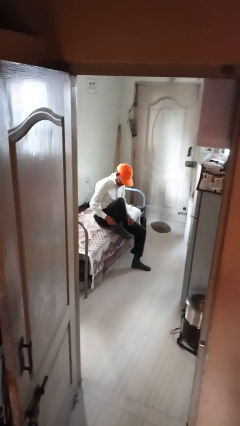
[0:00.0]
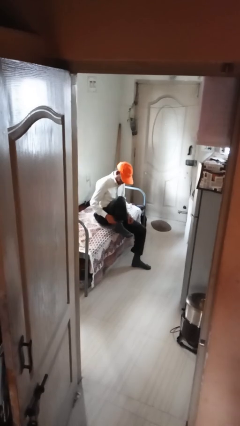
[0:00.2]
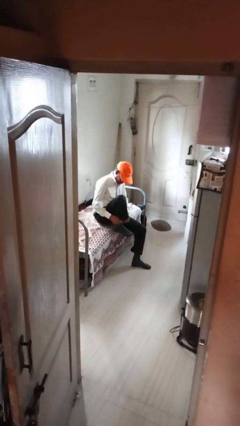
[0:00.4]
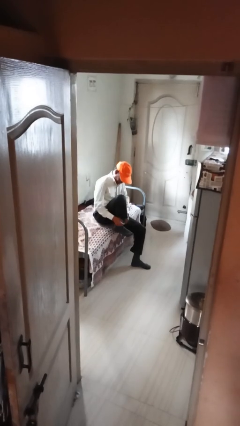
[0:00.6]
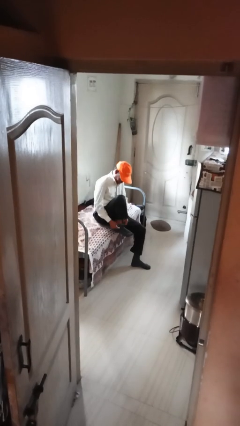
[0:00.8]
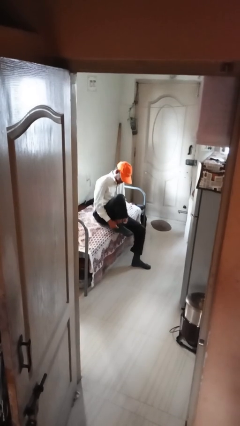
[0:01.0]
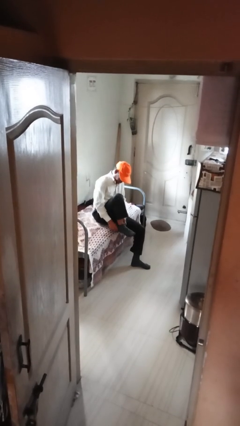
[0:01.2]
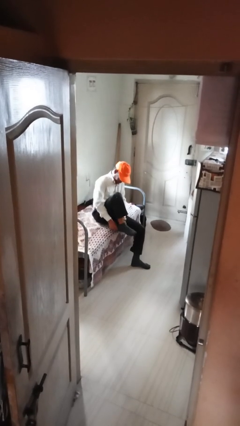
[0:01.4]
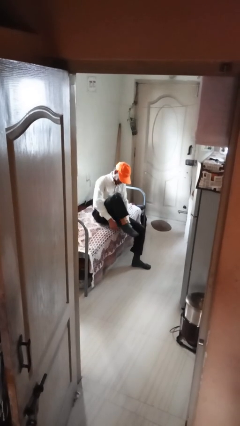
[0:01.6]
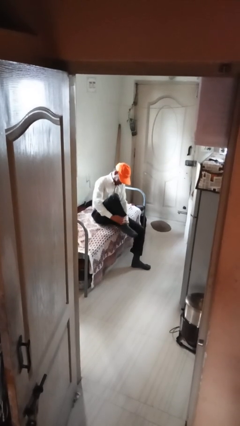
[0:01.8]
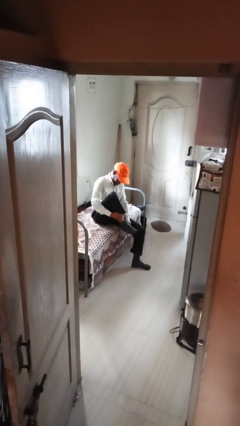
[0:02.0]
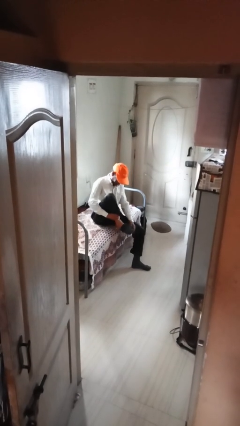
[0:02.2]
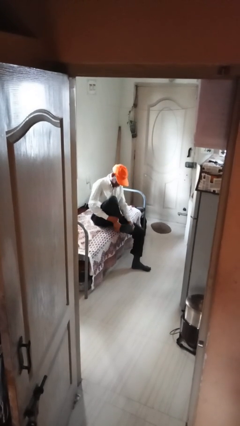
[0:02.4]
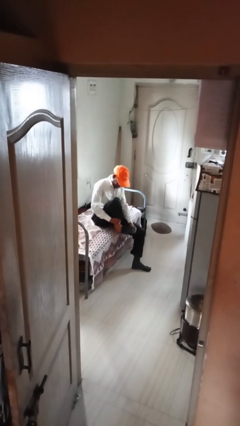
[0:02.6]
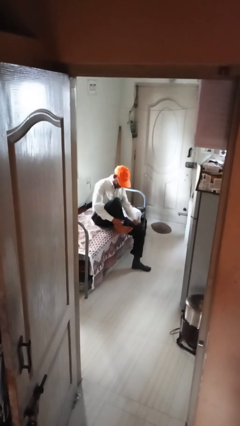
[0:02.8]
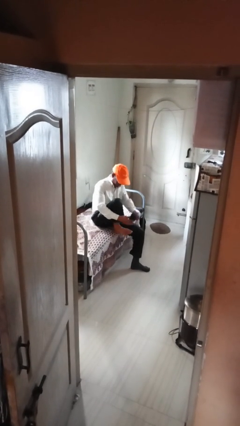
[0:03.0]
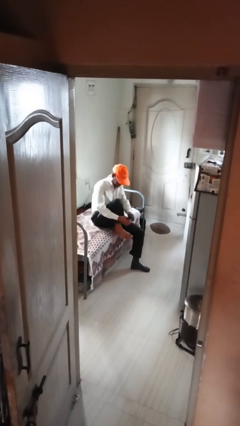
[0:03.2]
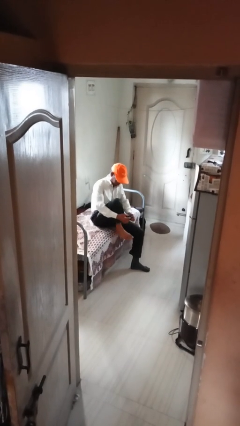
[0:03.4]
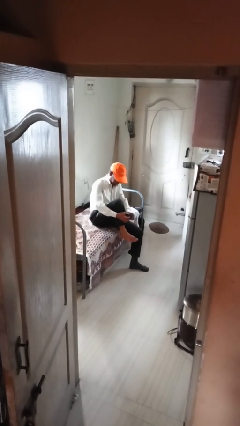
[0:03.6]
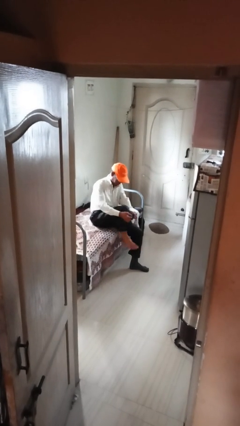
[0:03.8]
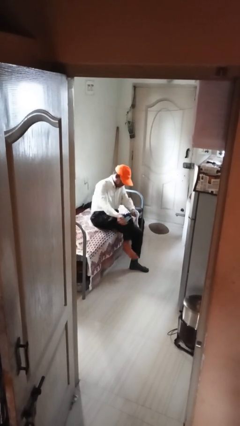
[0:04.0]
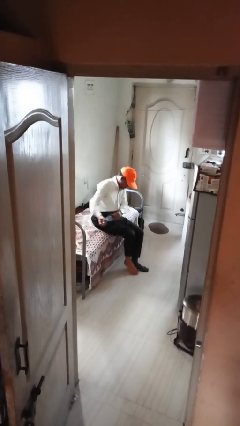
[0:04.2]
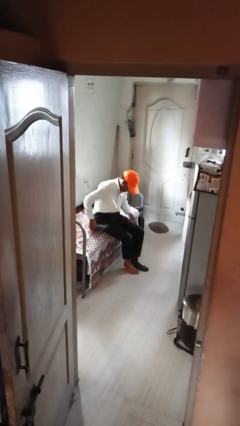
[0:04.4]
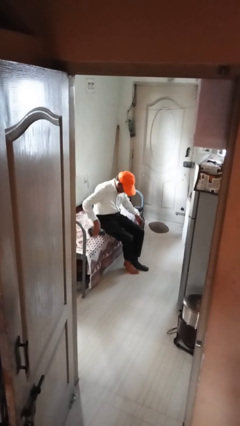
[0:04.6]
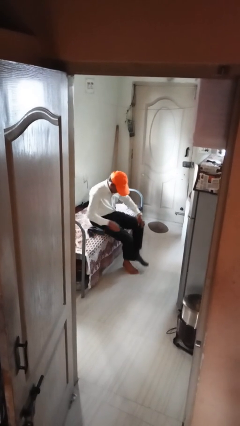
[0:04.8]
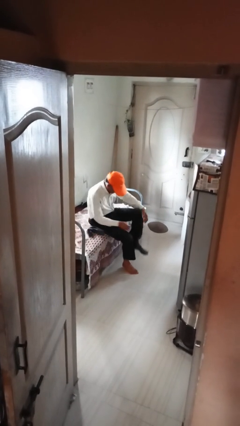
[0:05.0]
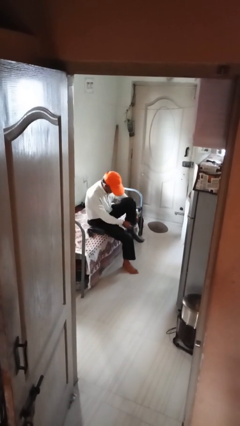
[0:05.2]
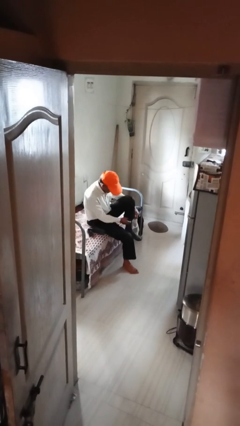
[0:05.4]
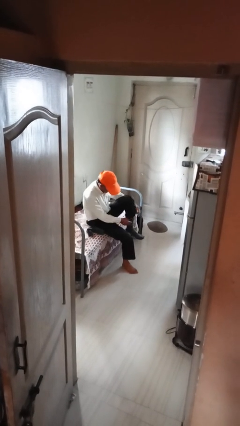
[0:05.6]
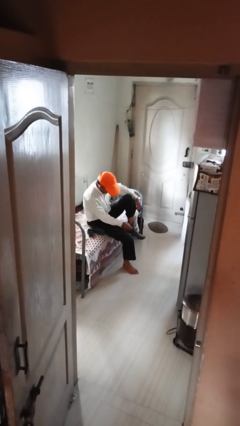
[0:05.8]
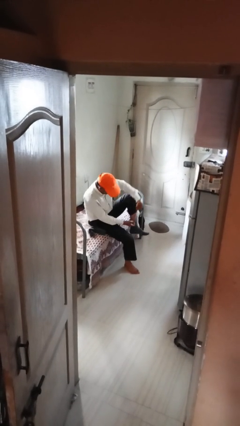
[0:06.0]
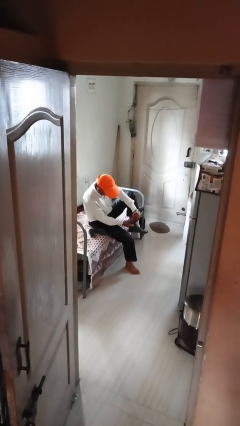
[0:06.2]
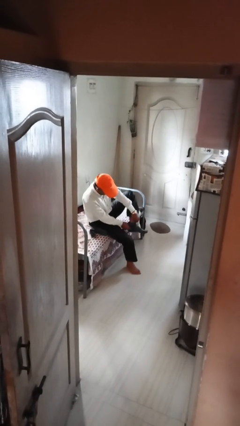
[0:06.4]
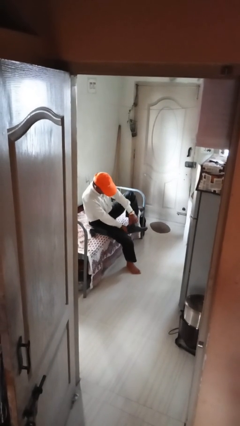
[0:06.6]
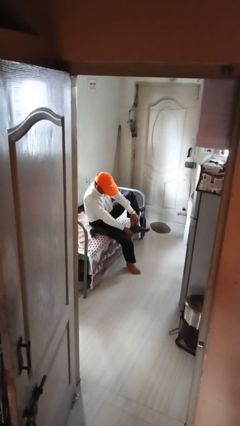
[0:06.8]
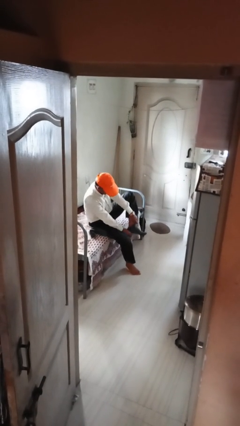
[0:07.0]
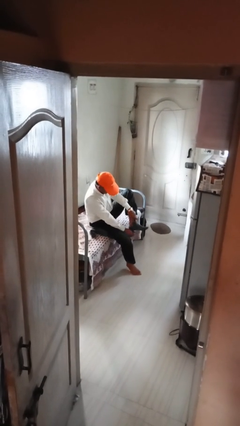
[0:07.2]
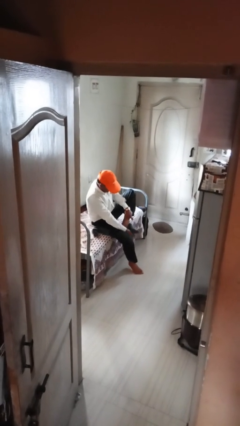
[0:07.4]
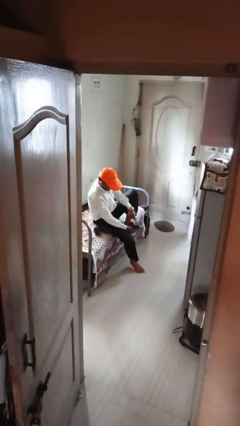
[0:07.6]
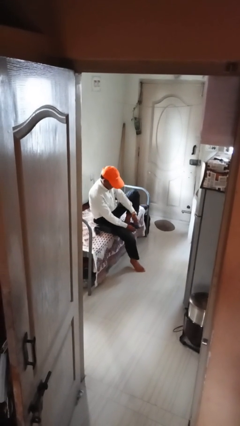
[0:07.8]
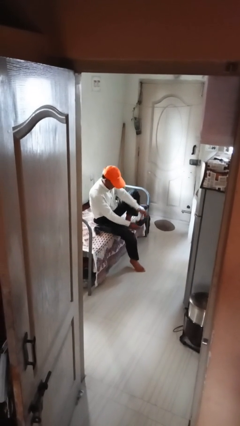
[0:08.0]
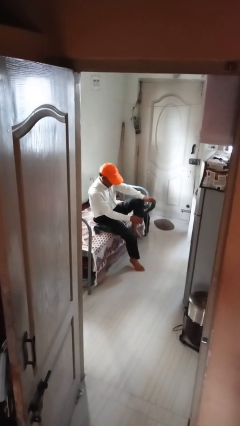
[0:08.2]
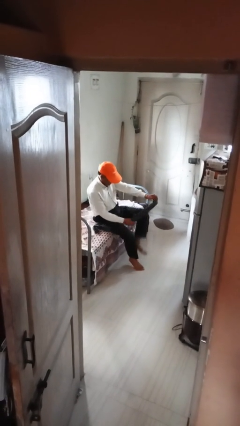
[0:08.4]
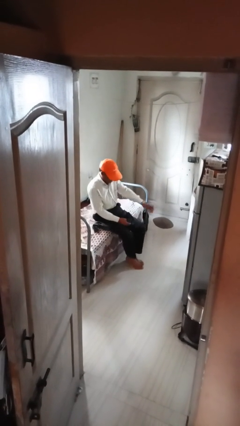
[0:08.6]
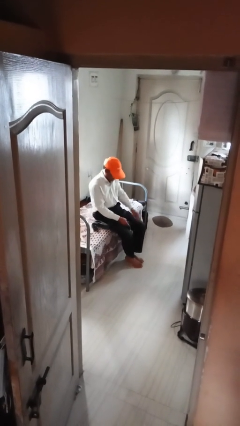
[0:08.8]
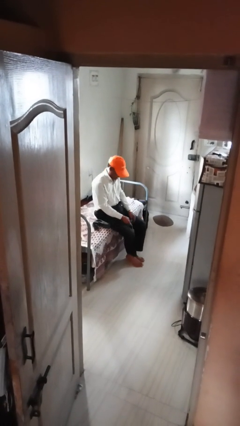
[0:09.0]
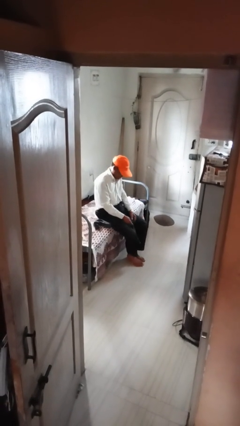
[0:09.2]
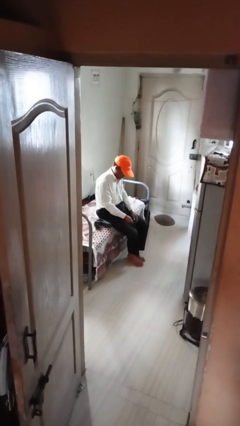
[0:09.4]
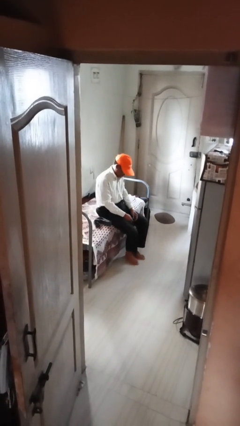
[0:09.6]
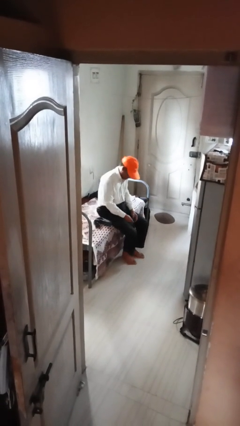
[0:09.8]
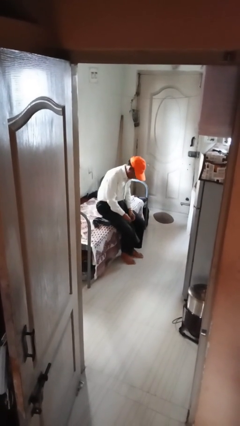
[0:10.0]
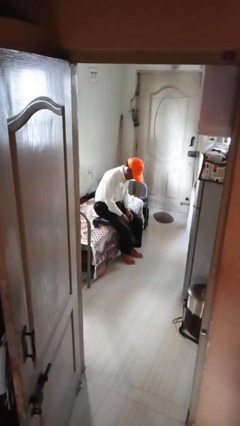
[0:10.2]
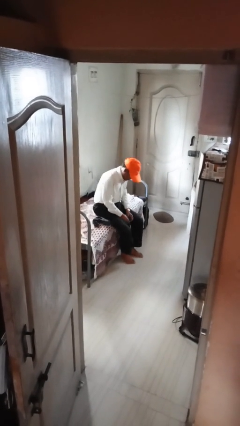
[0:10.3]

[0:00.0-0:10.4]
person takes off socks

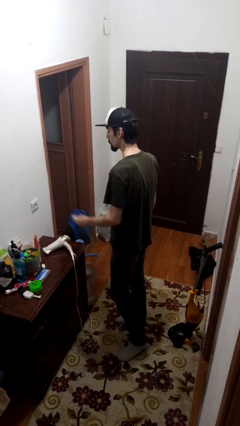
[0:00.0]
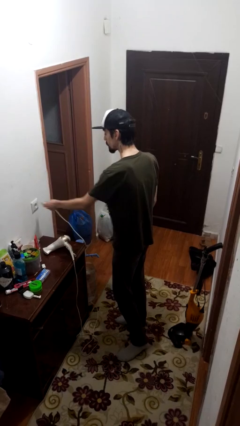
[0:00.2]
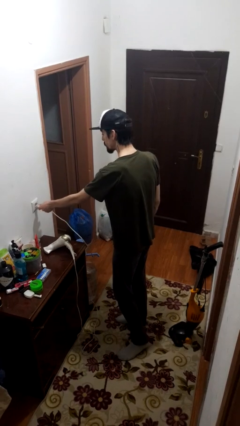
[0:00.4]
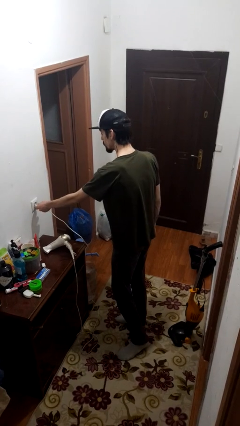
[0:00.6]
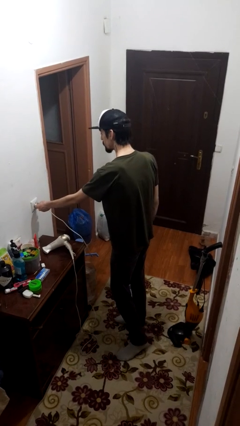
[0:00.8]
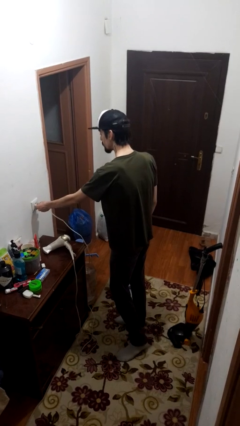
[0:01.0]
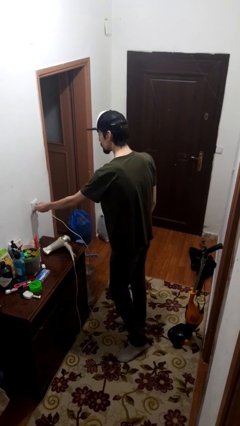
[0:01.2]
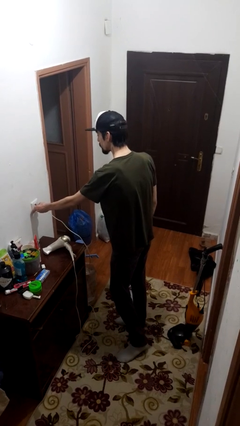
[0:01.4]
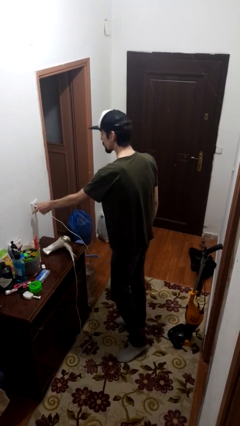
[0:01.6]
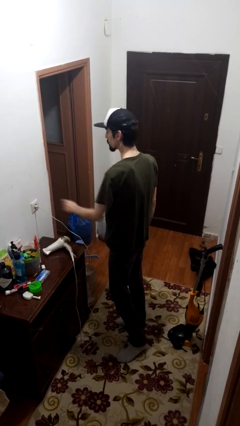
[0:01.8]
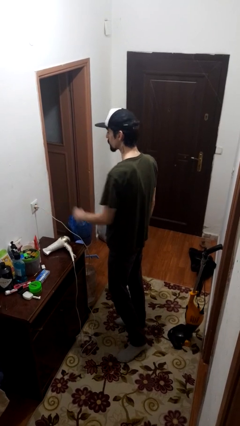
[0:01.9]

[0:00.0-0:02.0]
person plugs into electrical socket

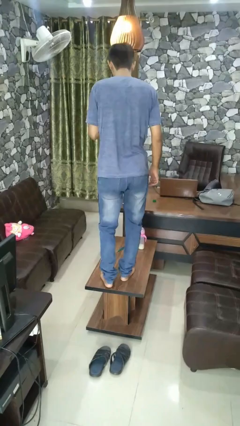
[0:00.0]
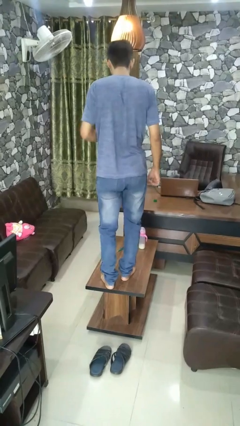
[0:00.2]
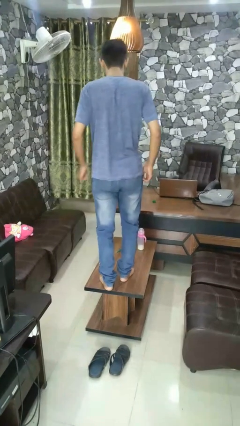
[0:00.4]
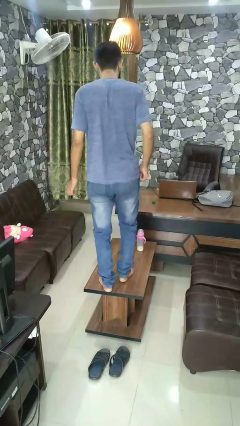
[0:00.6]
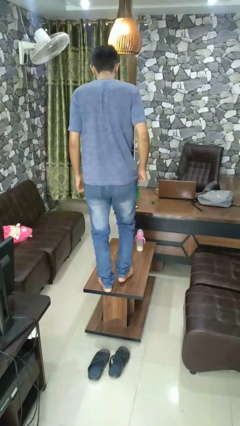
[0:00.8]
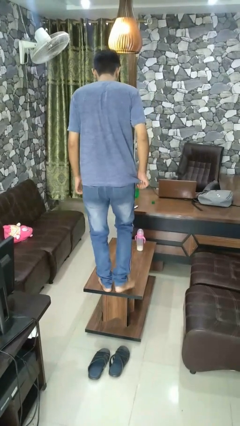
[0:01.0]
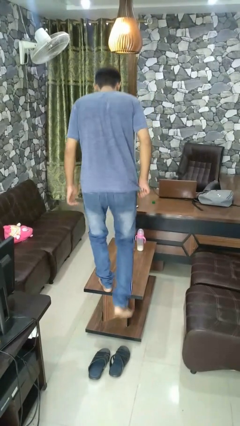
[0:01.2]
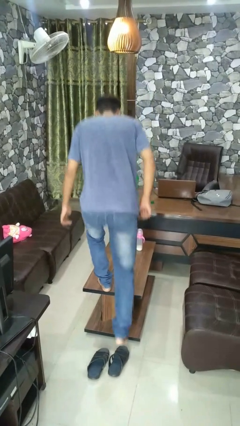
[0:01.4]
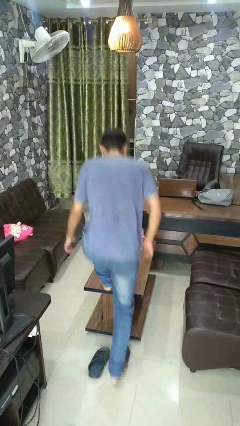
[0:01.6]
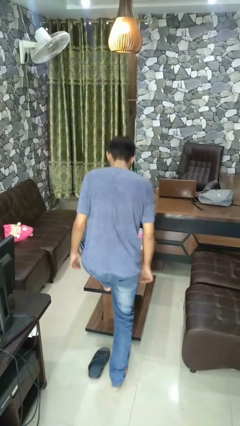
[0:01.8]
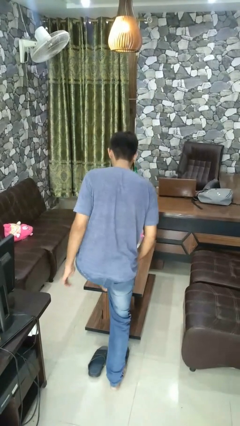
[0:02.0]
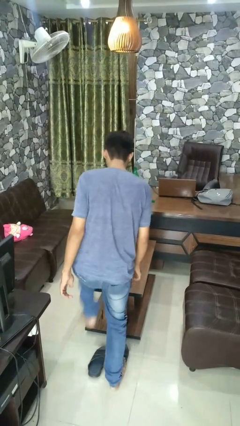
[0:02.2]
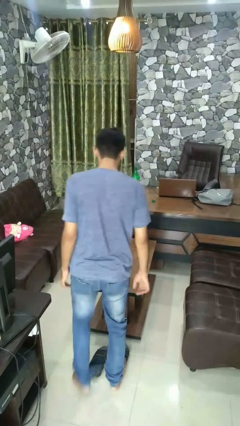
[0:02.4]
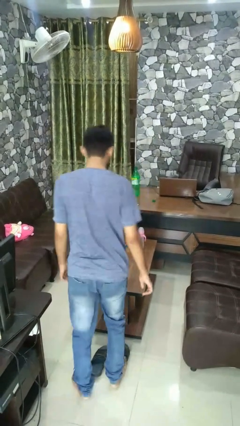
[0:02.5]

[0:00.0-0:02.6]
person climbs off table

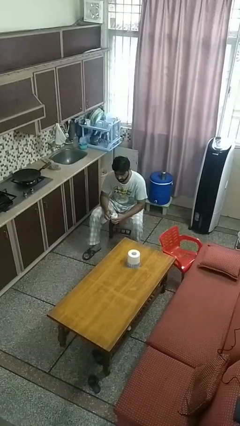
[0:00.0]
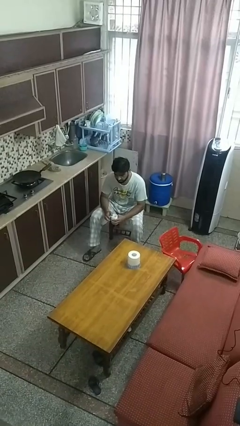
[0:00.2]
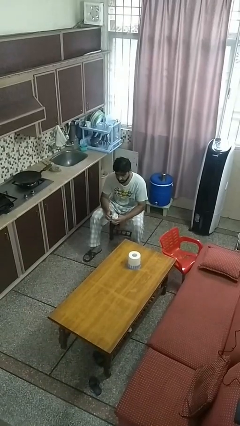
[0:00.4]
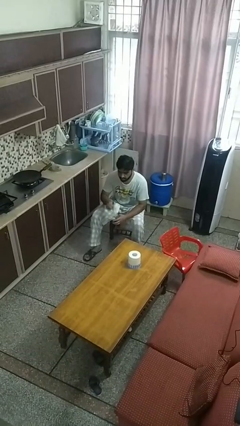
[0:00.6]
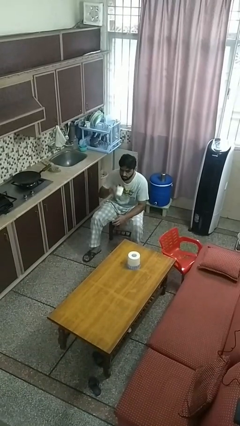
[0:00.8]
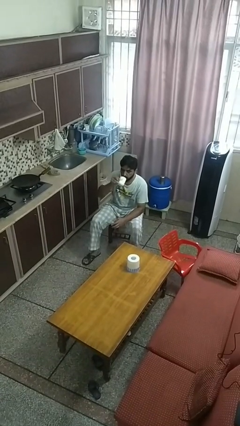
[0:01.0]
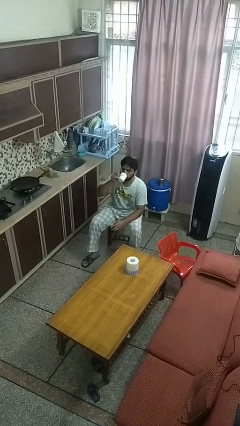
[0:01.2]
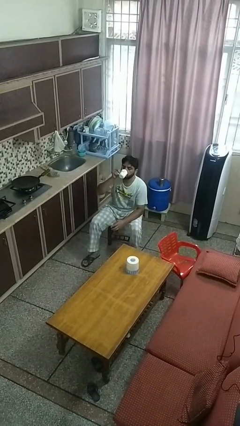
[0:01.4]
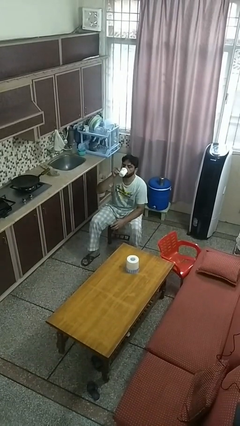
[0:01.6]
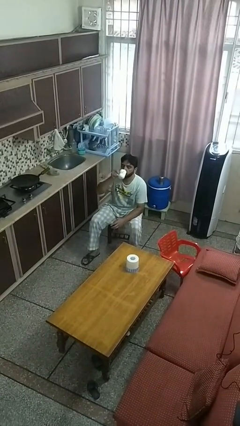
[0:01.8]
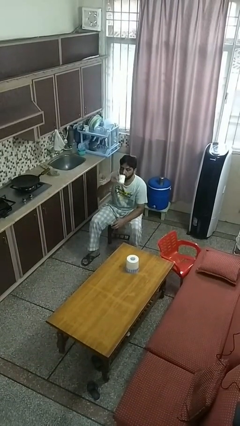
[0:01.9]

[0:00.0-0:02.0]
person drinks from mug

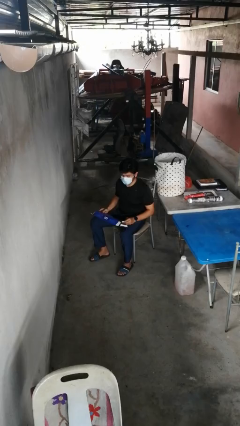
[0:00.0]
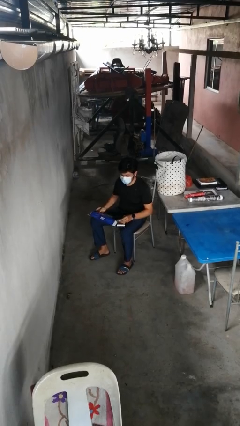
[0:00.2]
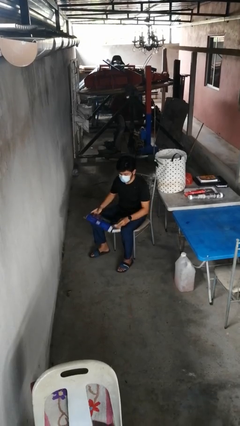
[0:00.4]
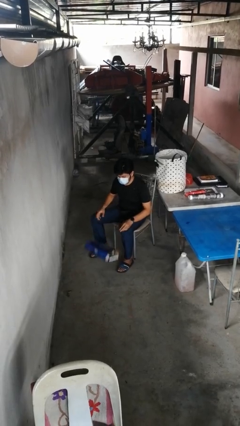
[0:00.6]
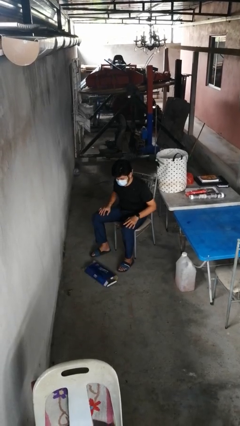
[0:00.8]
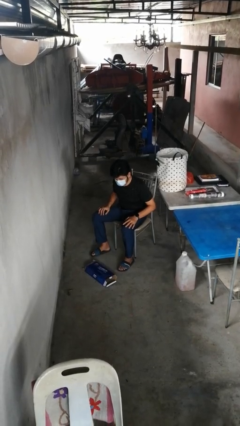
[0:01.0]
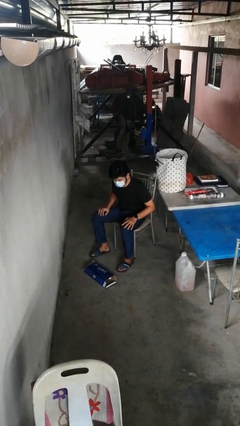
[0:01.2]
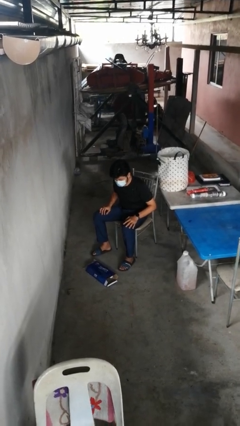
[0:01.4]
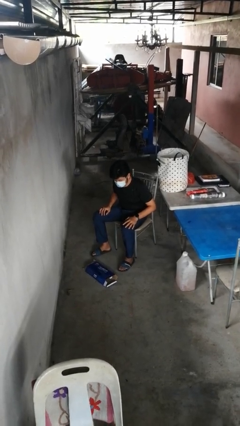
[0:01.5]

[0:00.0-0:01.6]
person drops object
